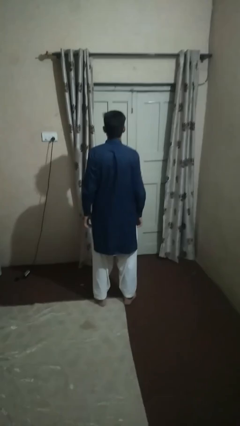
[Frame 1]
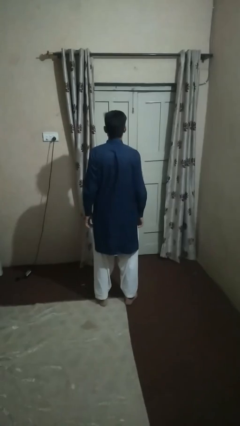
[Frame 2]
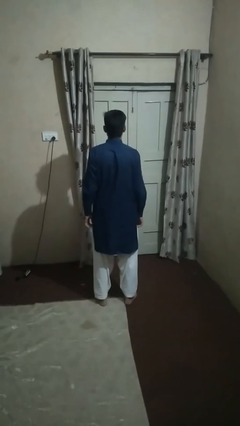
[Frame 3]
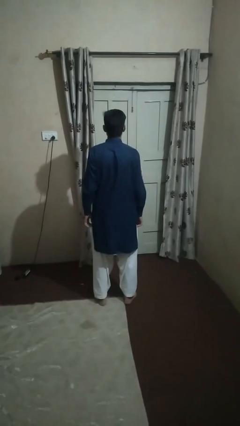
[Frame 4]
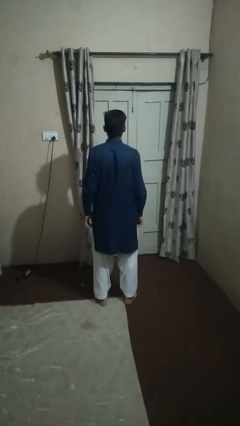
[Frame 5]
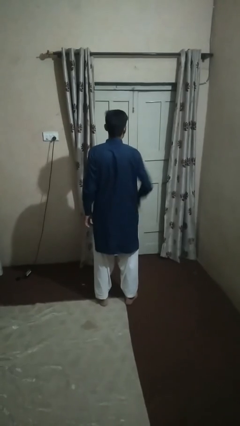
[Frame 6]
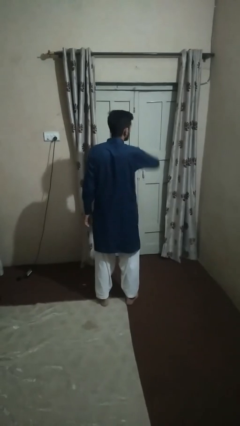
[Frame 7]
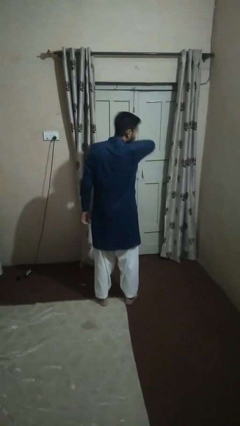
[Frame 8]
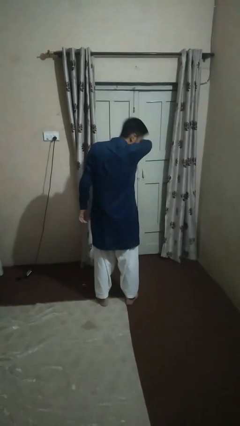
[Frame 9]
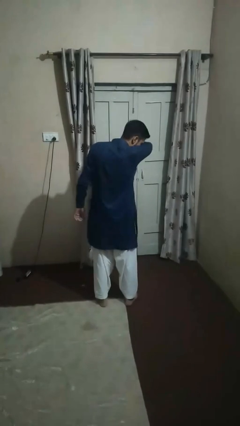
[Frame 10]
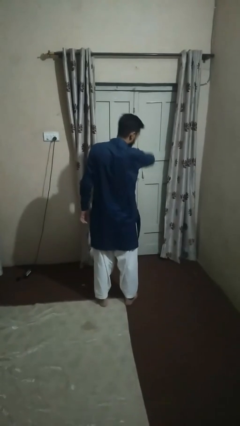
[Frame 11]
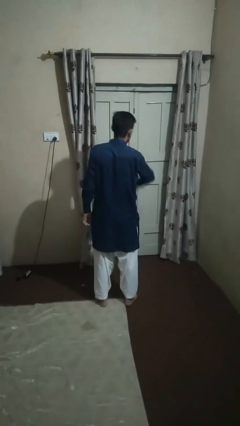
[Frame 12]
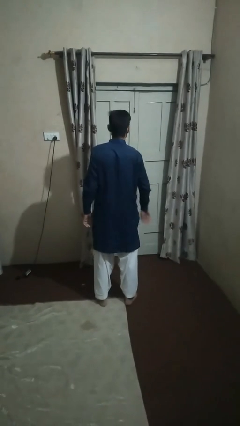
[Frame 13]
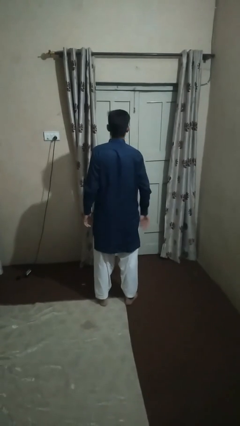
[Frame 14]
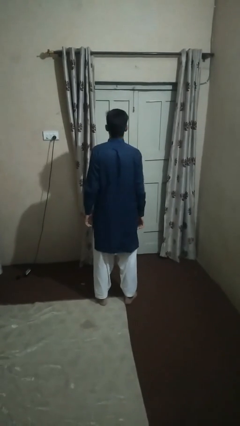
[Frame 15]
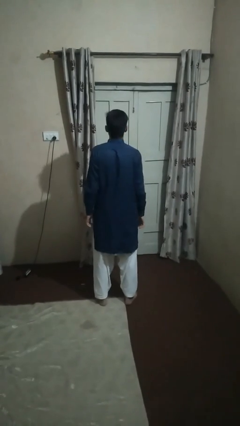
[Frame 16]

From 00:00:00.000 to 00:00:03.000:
person sneezes into arm

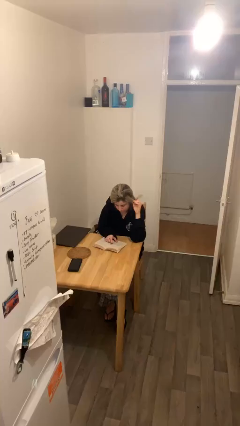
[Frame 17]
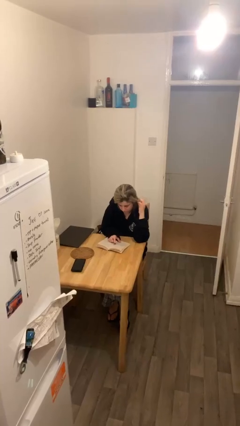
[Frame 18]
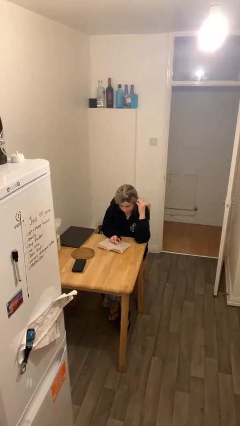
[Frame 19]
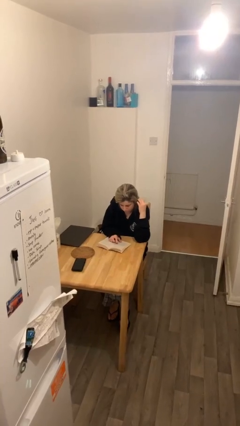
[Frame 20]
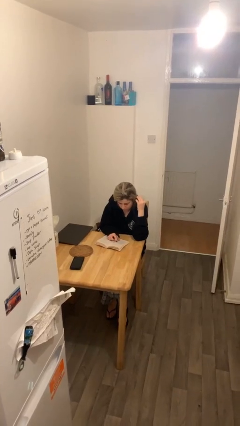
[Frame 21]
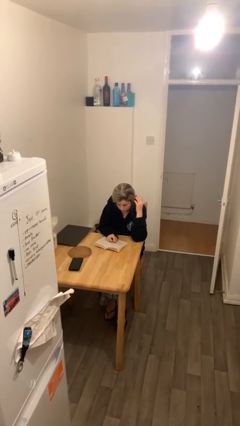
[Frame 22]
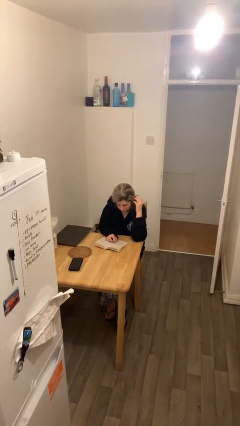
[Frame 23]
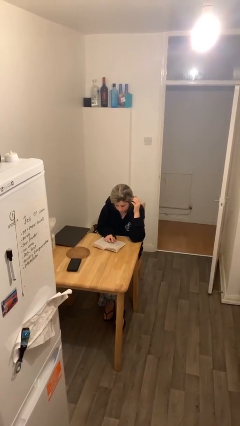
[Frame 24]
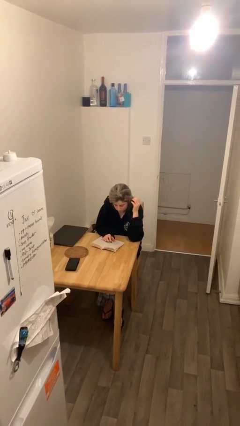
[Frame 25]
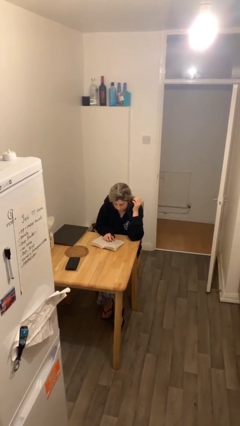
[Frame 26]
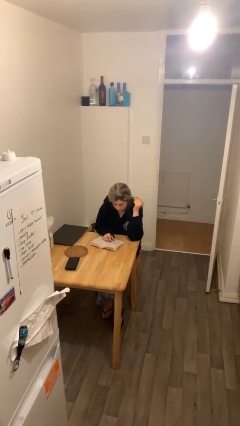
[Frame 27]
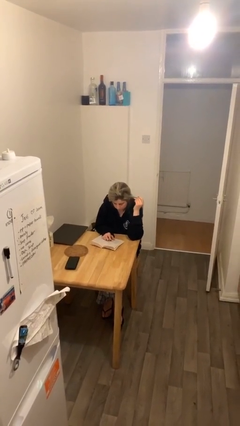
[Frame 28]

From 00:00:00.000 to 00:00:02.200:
person reads document

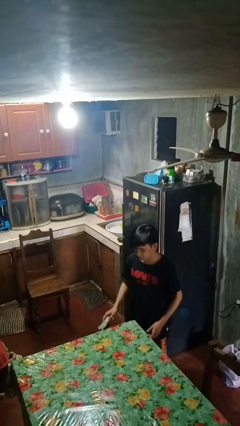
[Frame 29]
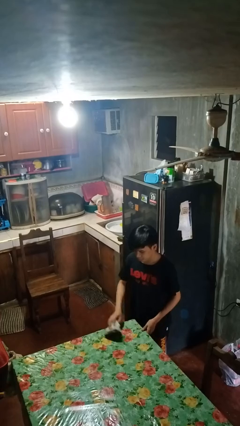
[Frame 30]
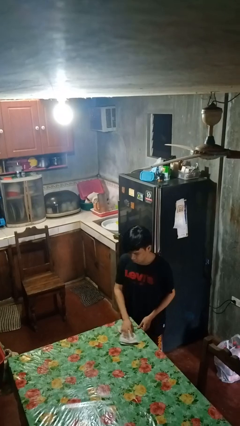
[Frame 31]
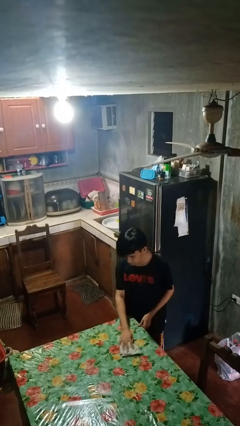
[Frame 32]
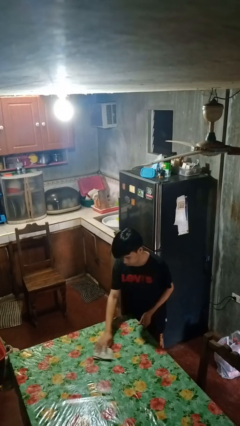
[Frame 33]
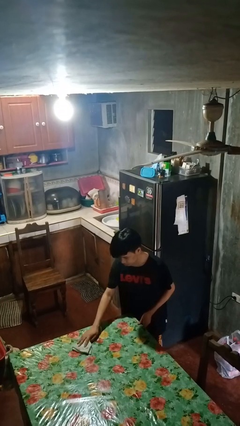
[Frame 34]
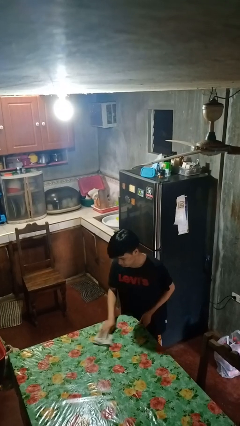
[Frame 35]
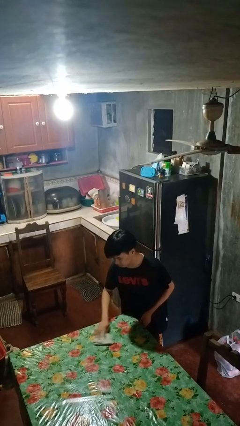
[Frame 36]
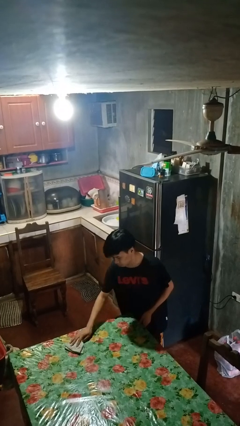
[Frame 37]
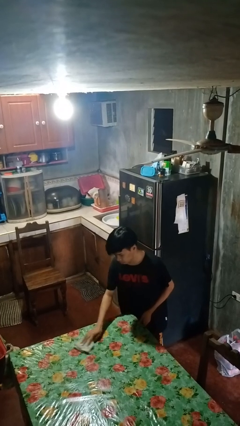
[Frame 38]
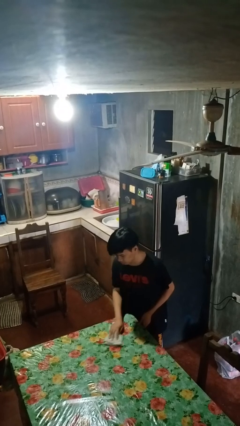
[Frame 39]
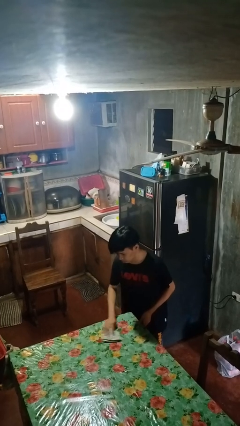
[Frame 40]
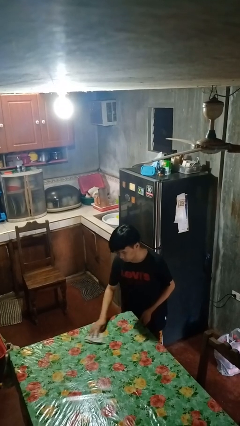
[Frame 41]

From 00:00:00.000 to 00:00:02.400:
person cleans table with rag

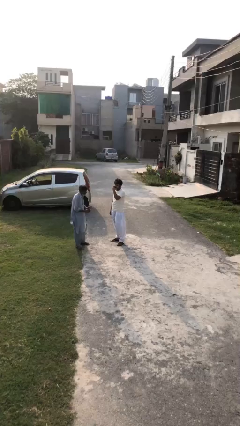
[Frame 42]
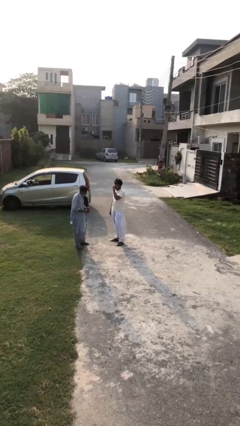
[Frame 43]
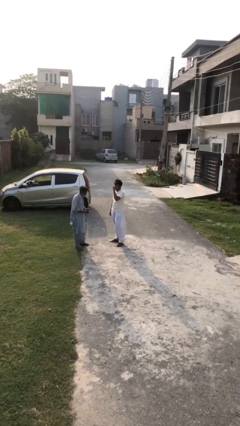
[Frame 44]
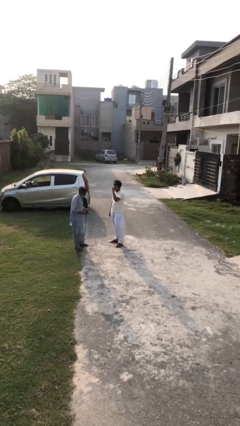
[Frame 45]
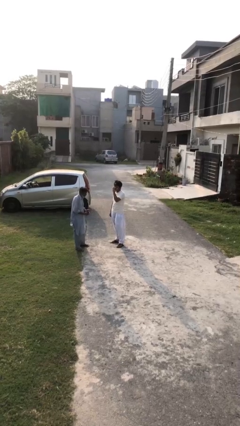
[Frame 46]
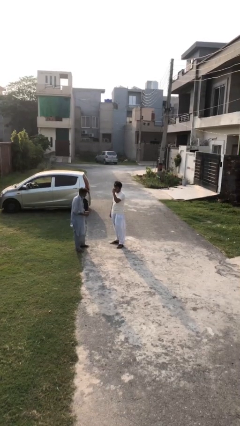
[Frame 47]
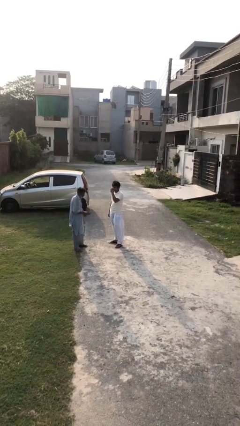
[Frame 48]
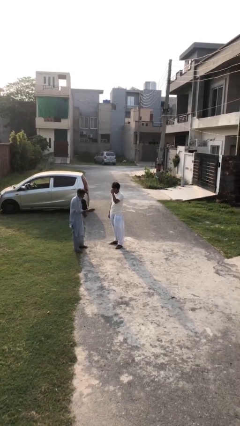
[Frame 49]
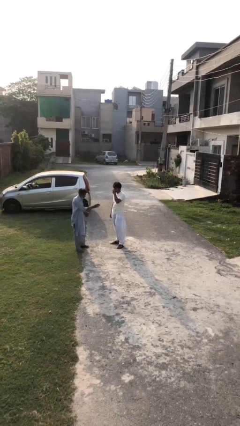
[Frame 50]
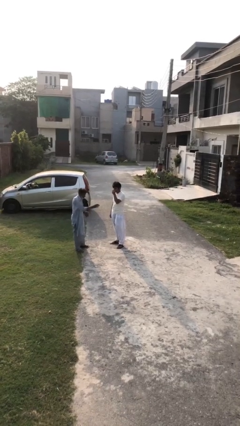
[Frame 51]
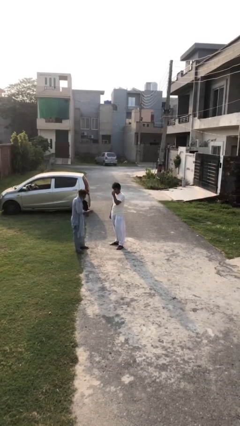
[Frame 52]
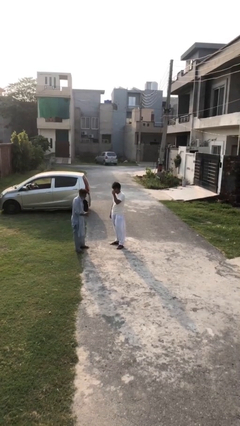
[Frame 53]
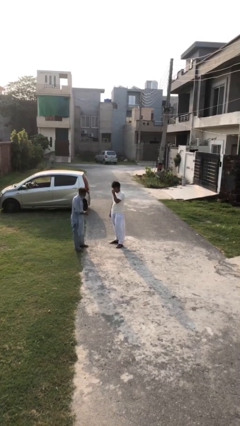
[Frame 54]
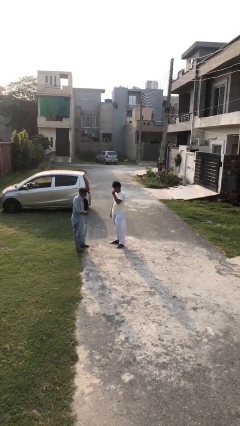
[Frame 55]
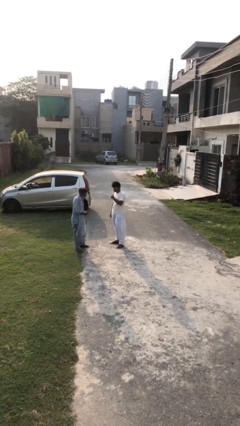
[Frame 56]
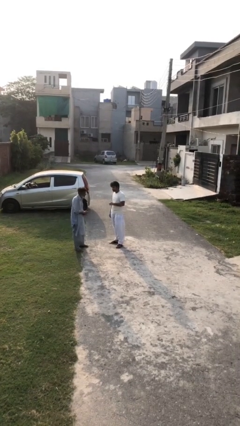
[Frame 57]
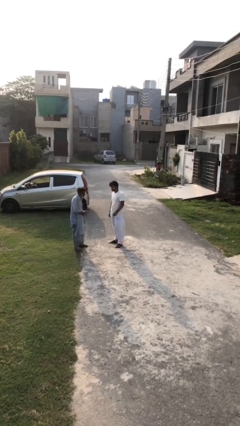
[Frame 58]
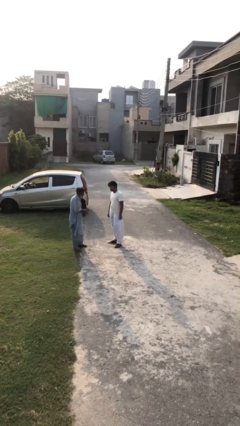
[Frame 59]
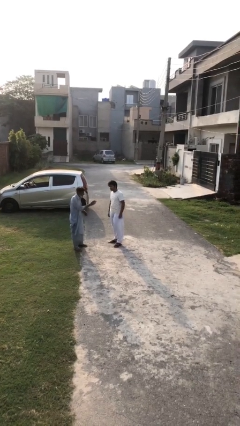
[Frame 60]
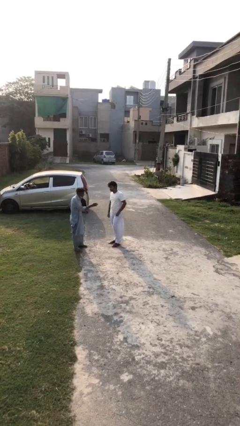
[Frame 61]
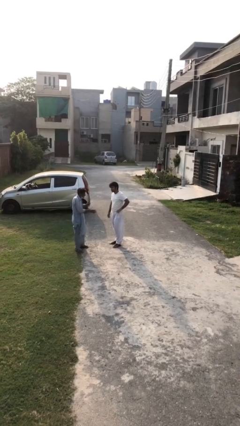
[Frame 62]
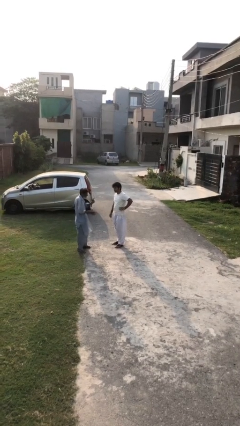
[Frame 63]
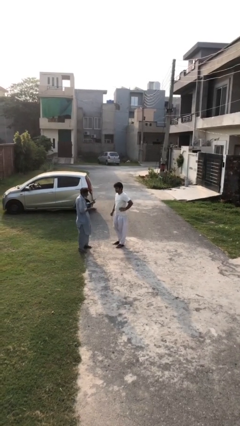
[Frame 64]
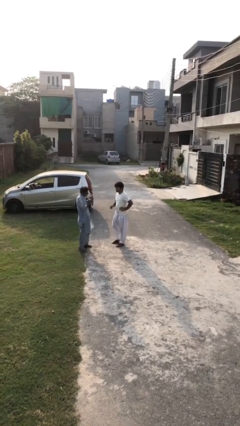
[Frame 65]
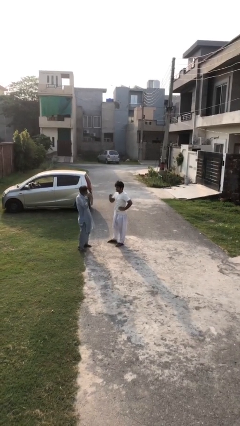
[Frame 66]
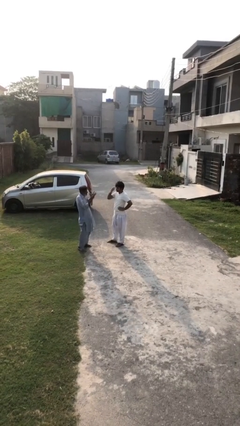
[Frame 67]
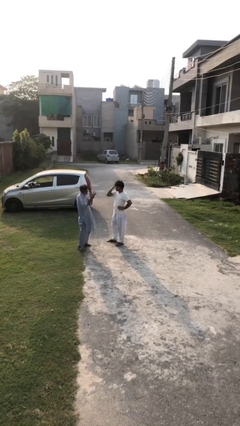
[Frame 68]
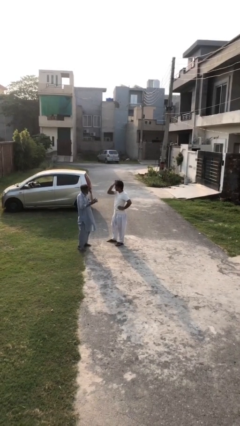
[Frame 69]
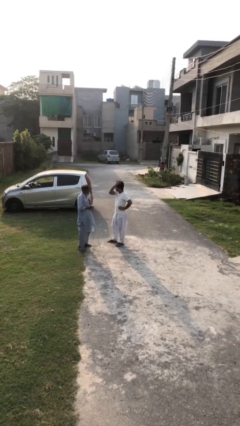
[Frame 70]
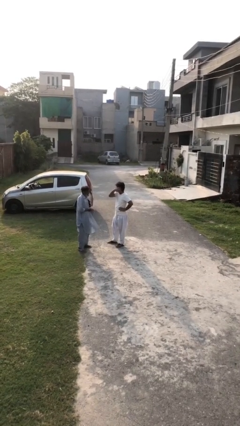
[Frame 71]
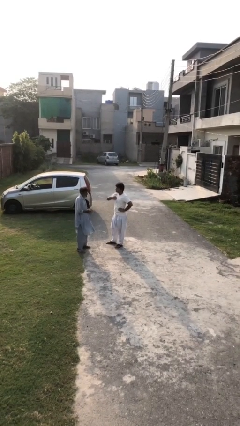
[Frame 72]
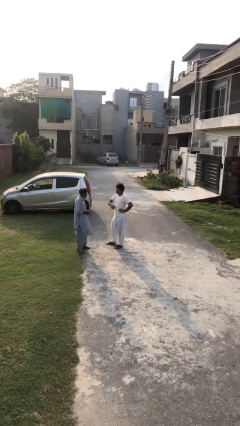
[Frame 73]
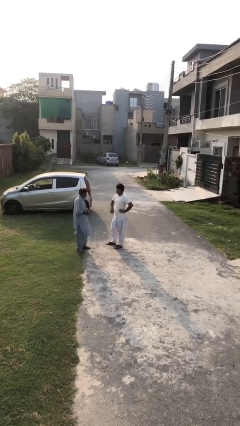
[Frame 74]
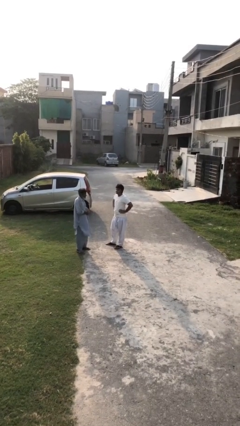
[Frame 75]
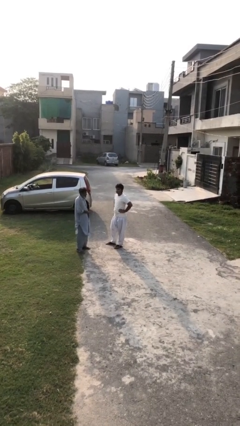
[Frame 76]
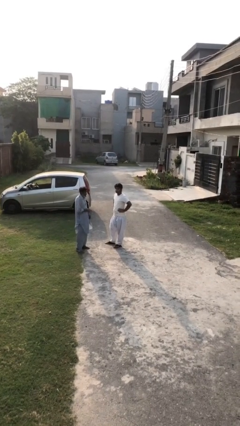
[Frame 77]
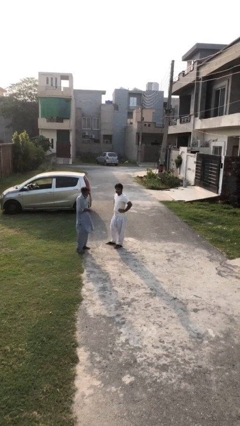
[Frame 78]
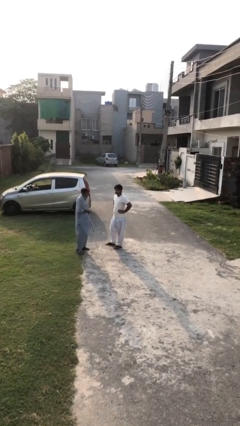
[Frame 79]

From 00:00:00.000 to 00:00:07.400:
person talks to person

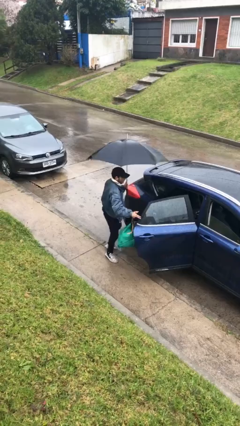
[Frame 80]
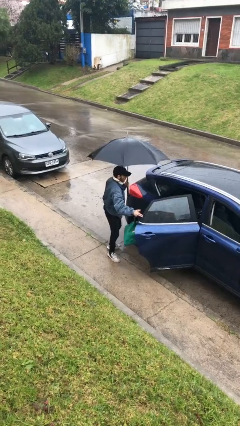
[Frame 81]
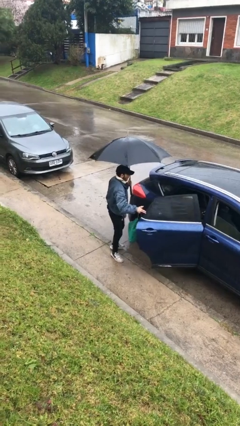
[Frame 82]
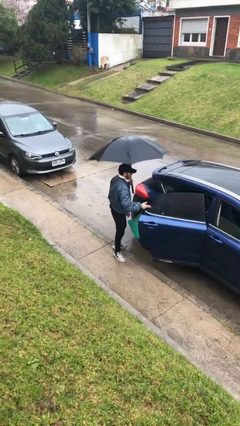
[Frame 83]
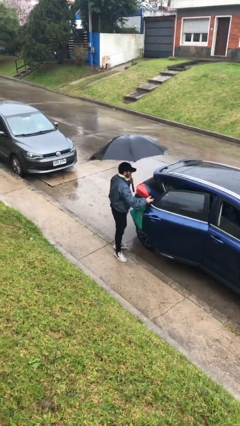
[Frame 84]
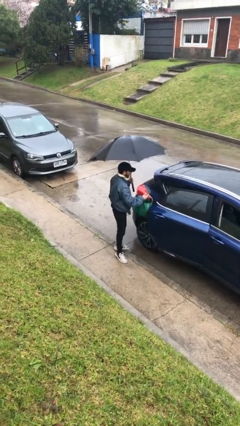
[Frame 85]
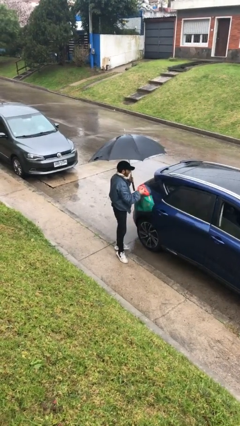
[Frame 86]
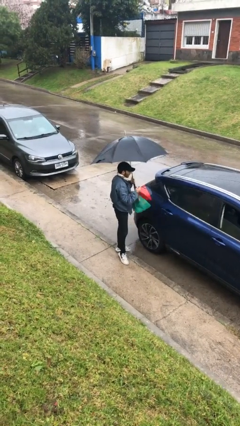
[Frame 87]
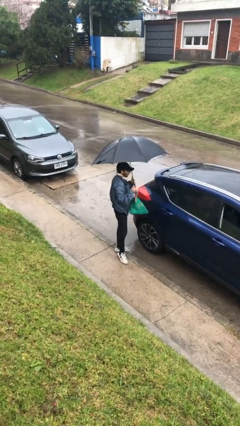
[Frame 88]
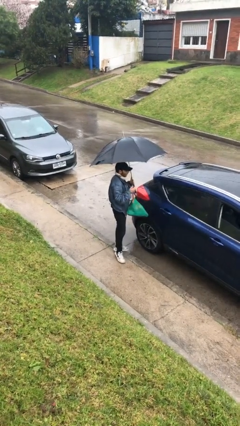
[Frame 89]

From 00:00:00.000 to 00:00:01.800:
person closes car door

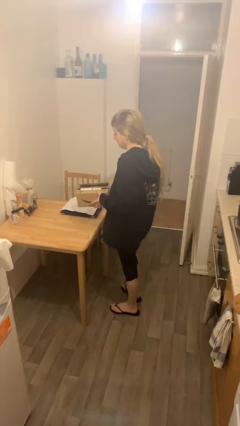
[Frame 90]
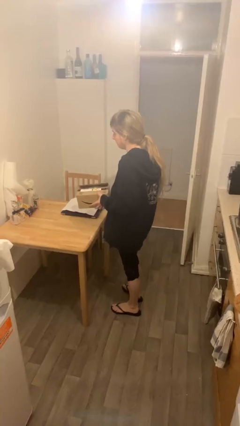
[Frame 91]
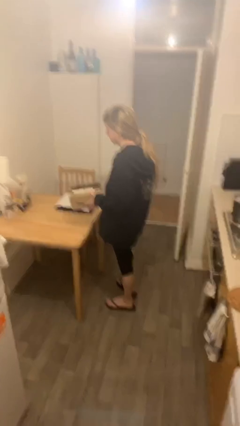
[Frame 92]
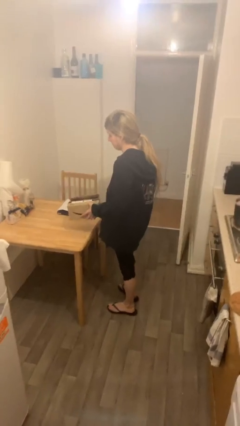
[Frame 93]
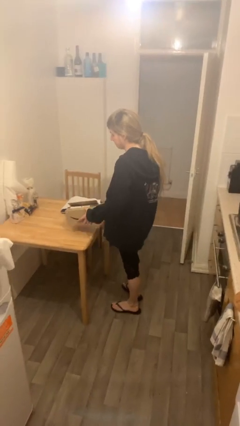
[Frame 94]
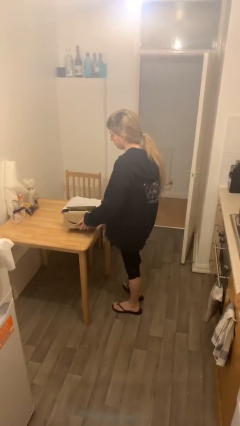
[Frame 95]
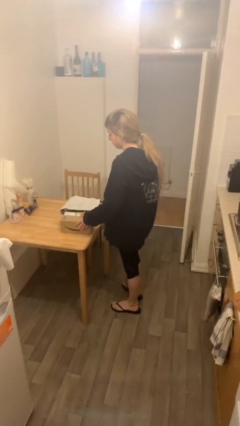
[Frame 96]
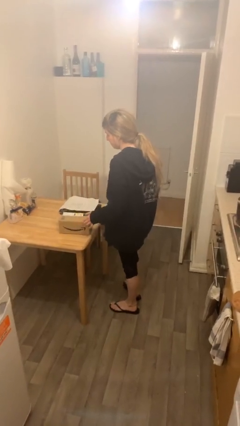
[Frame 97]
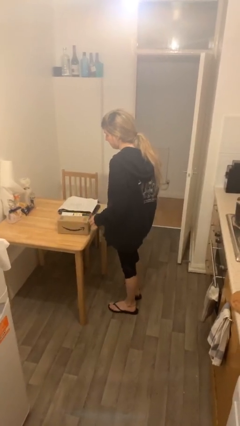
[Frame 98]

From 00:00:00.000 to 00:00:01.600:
person puts down object on table